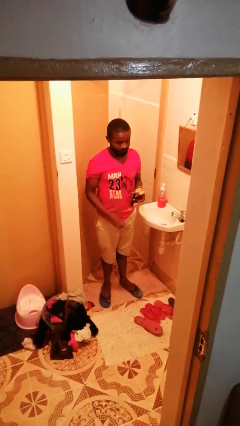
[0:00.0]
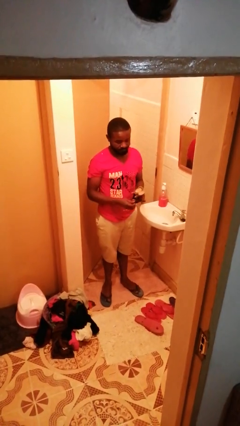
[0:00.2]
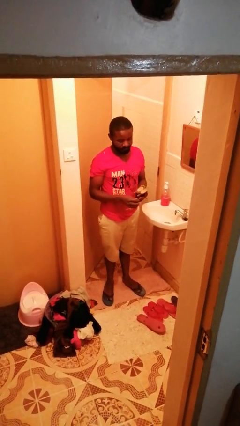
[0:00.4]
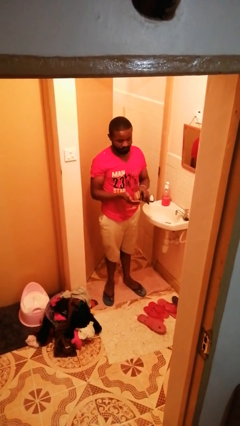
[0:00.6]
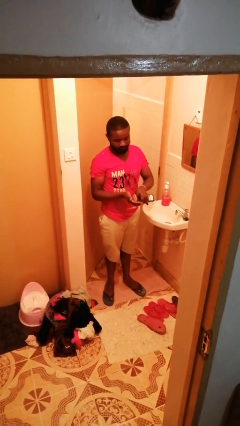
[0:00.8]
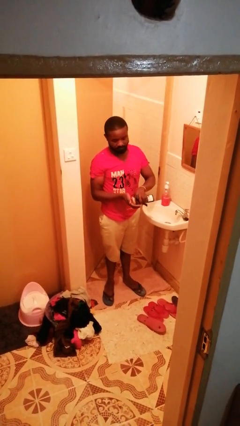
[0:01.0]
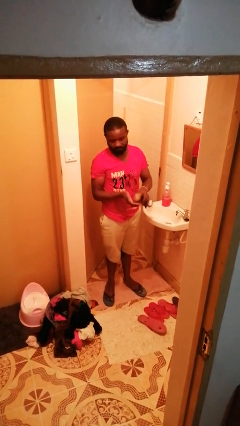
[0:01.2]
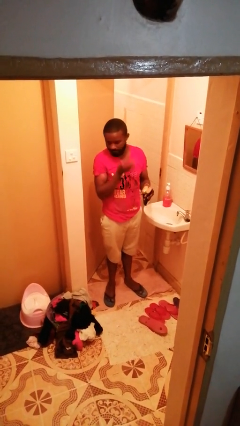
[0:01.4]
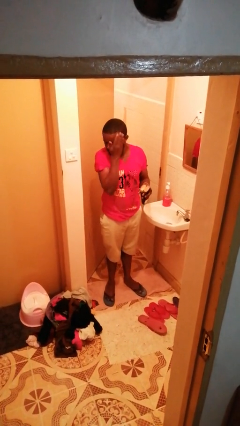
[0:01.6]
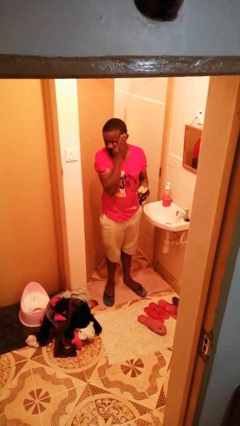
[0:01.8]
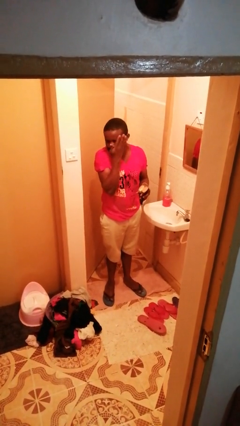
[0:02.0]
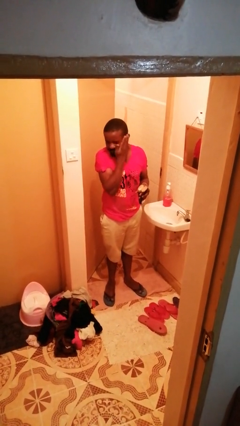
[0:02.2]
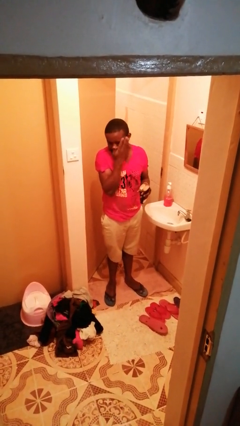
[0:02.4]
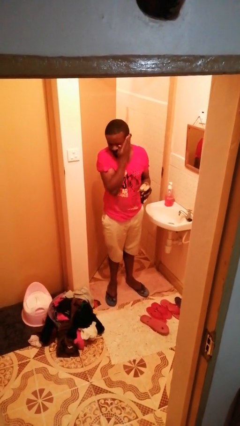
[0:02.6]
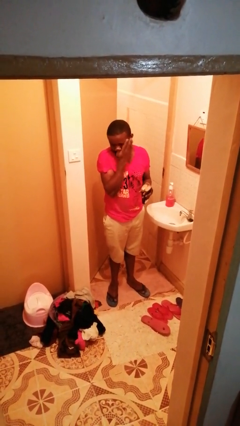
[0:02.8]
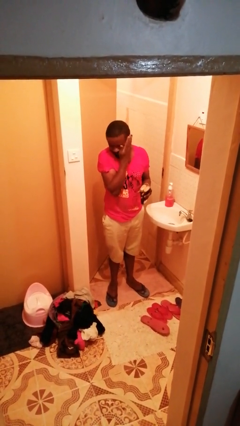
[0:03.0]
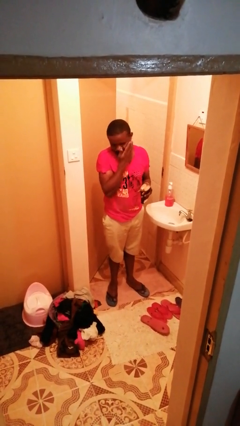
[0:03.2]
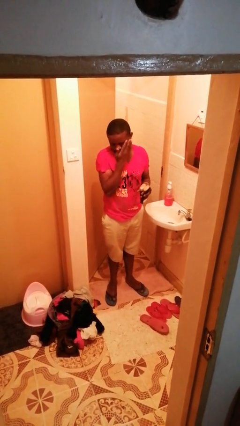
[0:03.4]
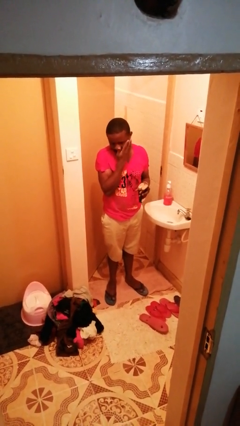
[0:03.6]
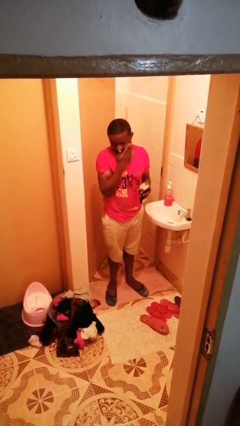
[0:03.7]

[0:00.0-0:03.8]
person applies shaving cream

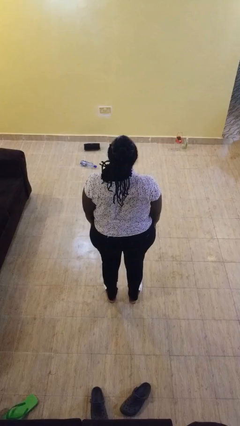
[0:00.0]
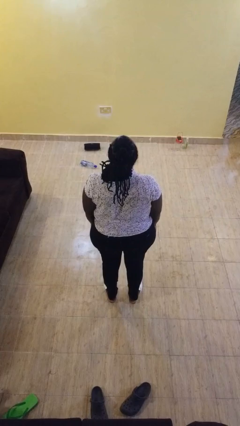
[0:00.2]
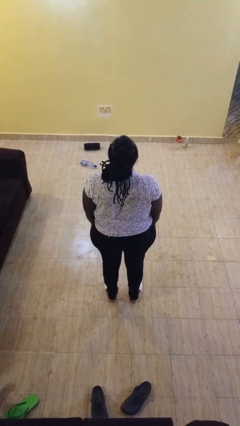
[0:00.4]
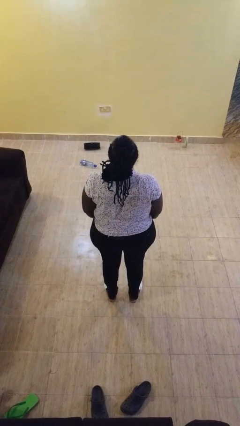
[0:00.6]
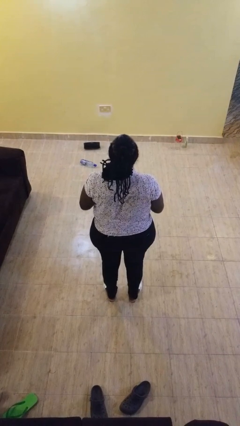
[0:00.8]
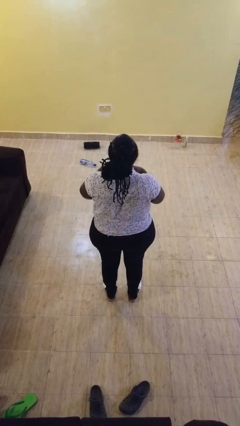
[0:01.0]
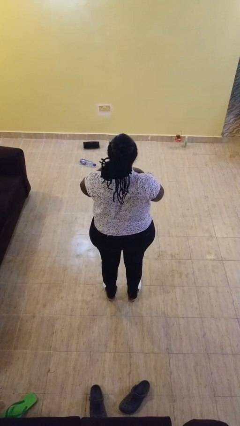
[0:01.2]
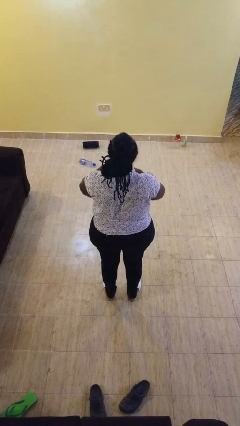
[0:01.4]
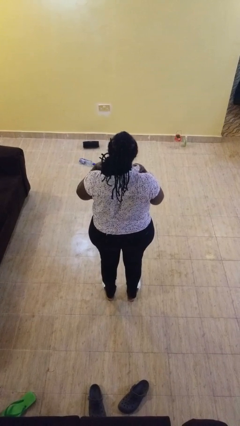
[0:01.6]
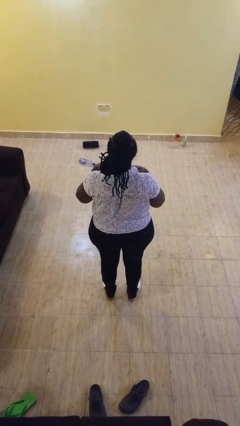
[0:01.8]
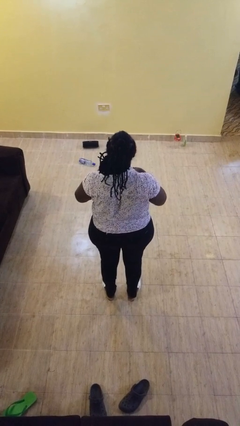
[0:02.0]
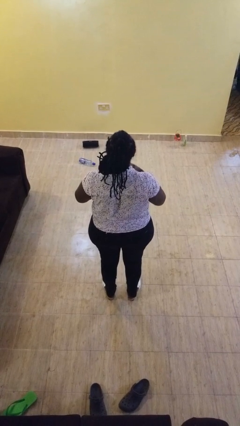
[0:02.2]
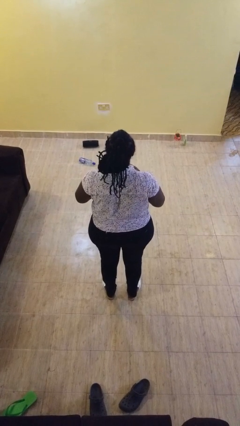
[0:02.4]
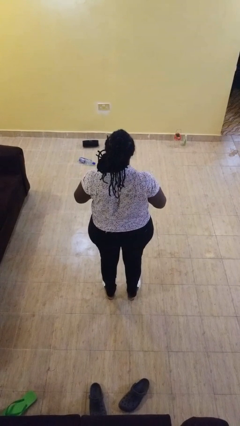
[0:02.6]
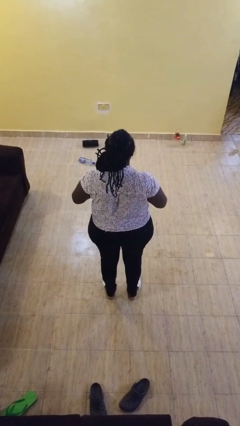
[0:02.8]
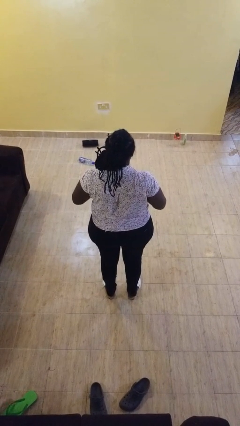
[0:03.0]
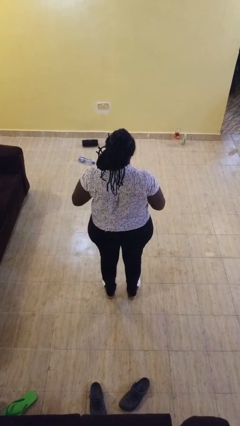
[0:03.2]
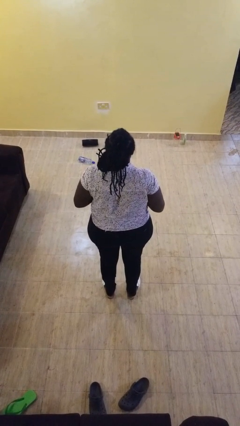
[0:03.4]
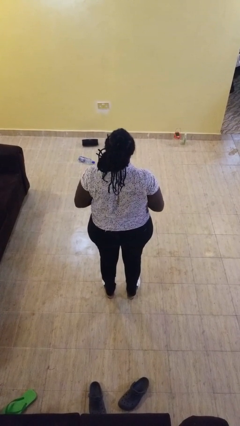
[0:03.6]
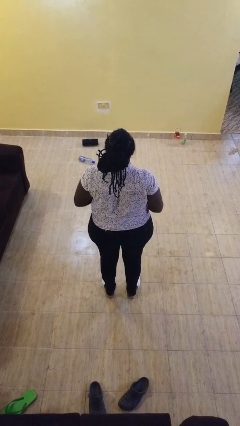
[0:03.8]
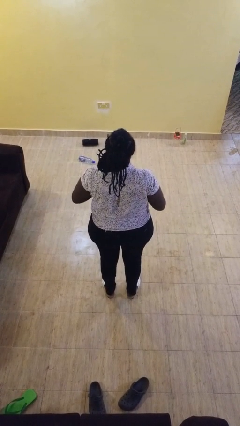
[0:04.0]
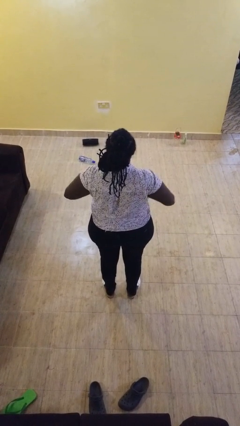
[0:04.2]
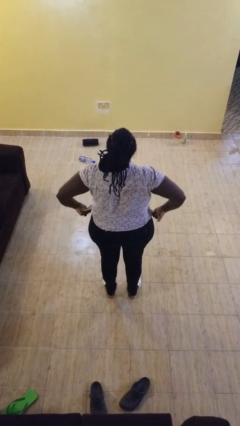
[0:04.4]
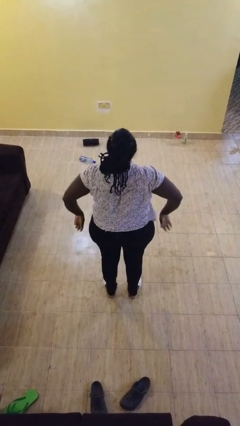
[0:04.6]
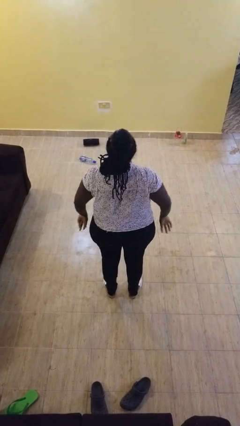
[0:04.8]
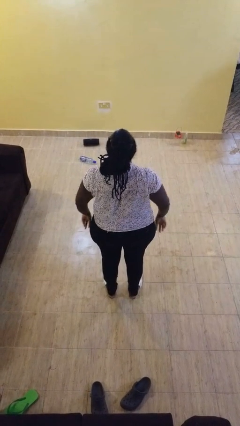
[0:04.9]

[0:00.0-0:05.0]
person unbuttons shirt

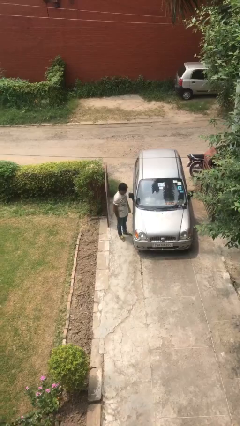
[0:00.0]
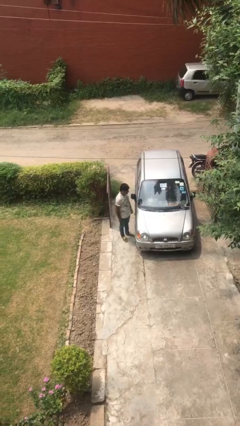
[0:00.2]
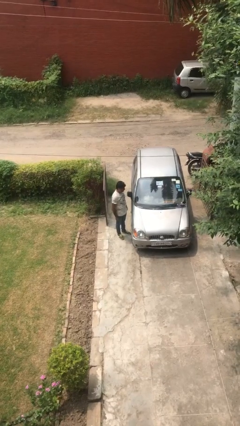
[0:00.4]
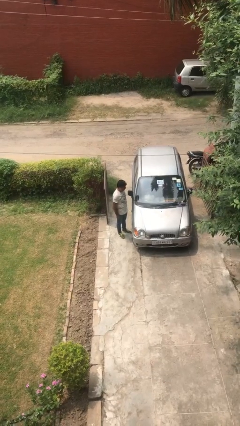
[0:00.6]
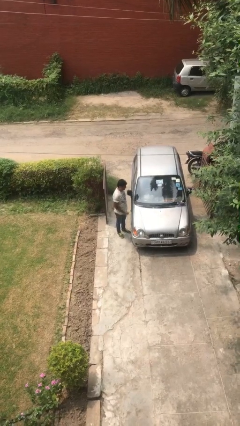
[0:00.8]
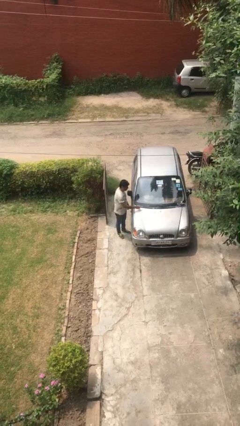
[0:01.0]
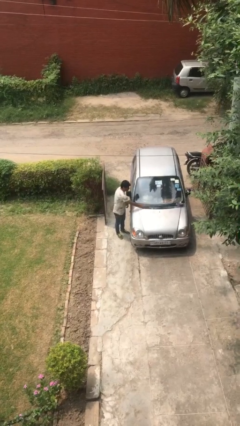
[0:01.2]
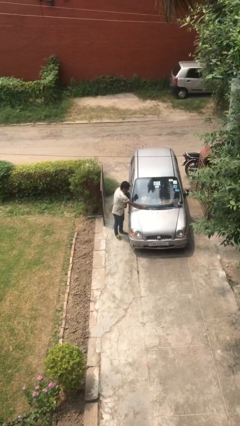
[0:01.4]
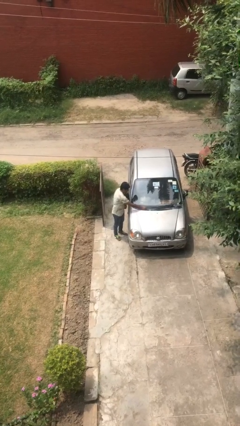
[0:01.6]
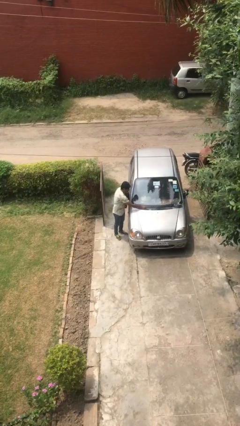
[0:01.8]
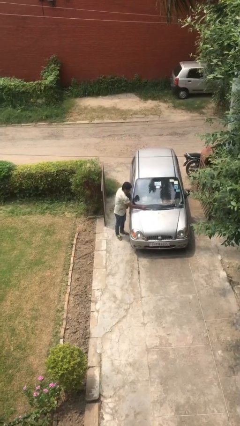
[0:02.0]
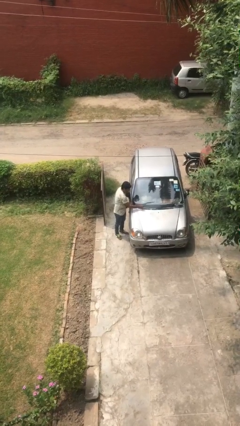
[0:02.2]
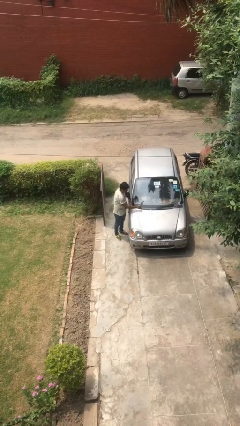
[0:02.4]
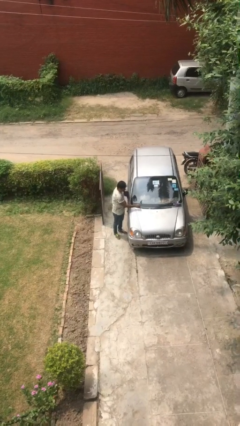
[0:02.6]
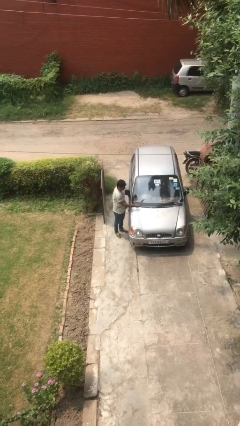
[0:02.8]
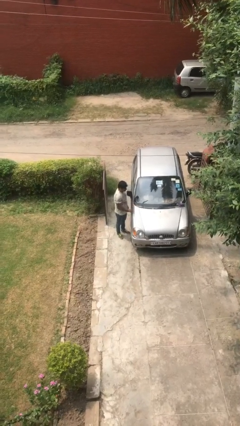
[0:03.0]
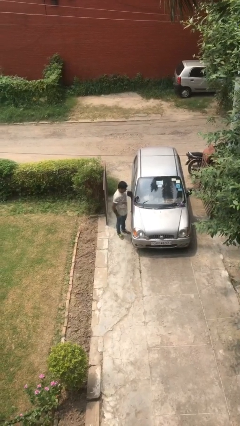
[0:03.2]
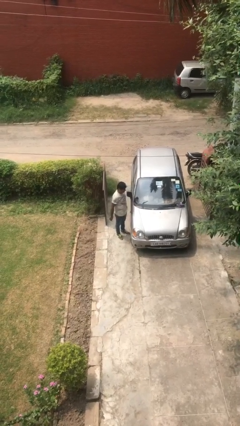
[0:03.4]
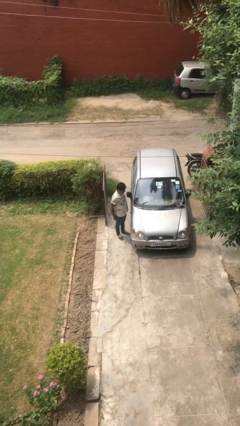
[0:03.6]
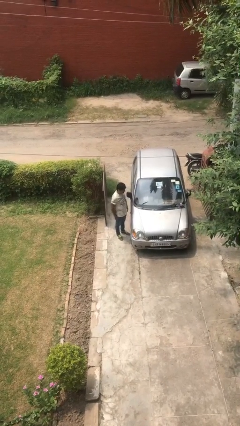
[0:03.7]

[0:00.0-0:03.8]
person flips up car wipers

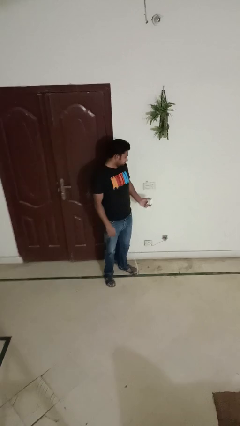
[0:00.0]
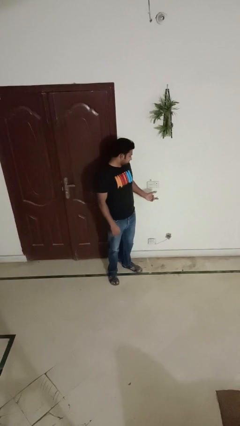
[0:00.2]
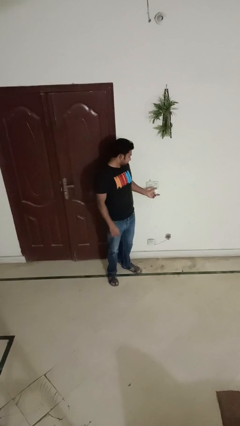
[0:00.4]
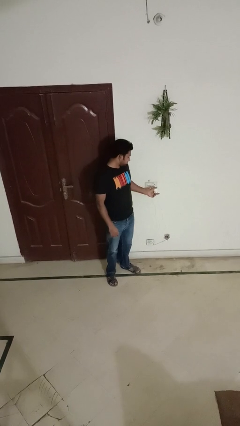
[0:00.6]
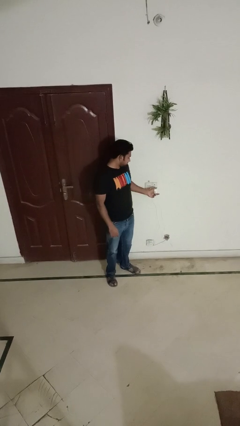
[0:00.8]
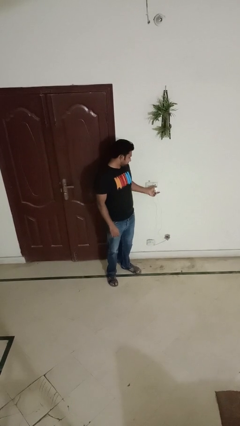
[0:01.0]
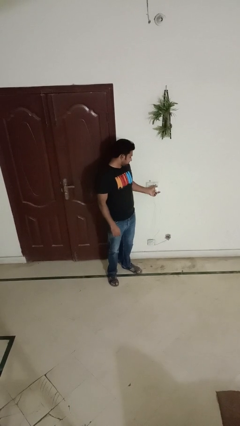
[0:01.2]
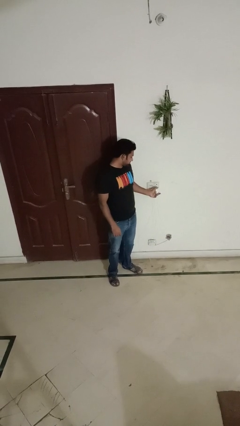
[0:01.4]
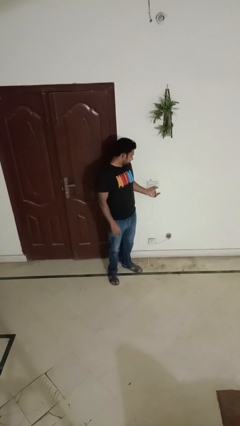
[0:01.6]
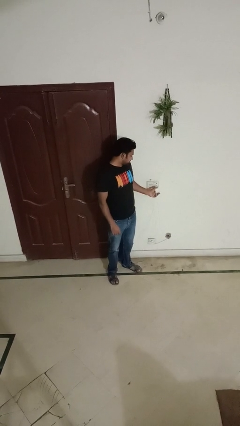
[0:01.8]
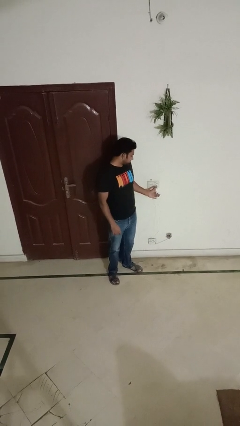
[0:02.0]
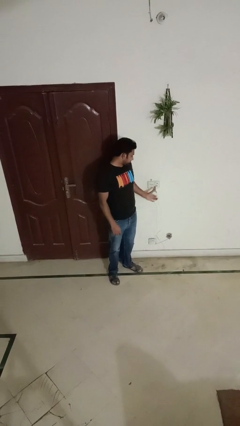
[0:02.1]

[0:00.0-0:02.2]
person plugs into electrical socket

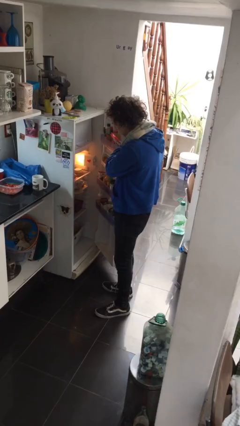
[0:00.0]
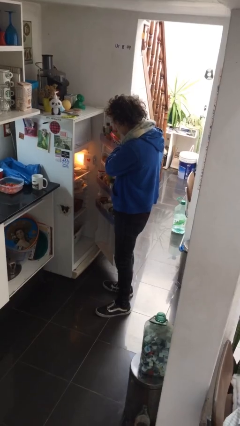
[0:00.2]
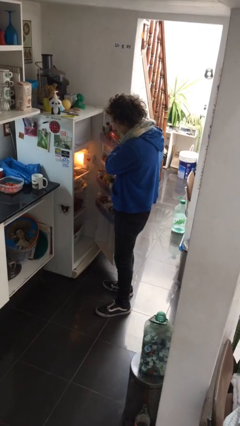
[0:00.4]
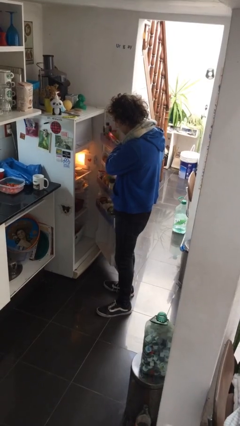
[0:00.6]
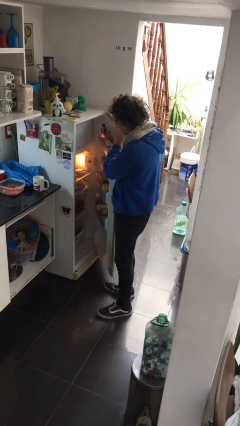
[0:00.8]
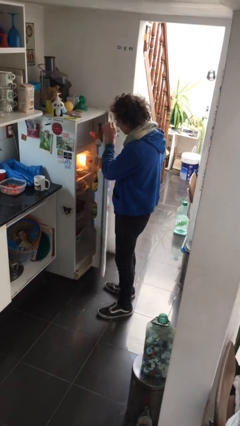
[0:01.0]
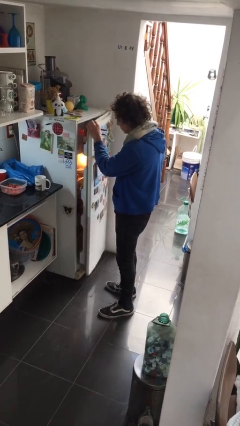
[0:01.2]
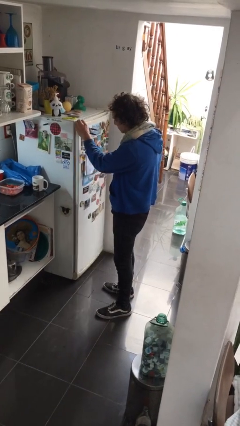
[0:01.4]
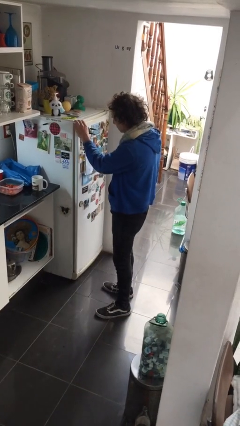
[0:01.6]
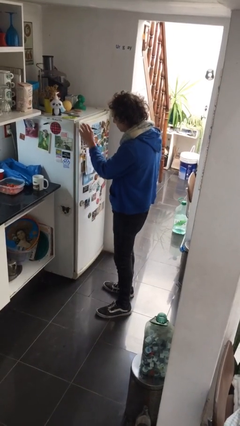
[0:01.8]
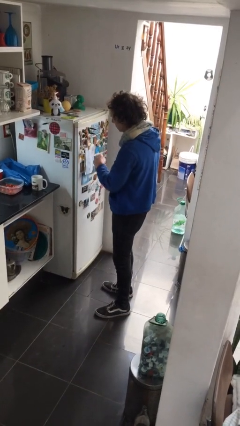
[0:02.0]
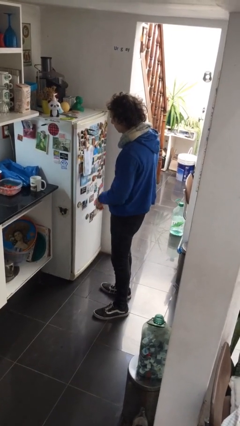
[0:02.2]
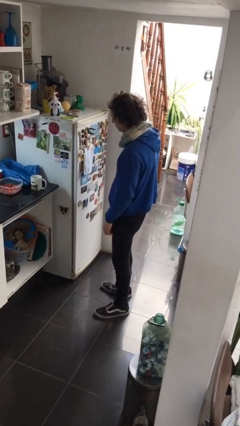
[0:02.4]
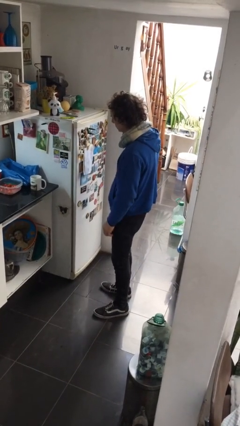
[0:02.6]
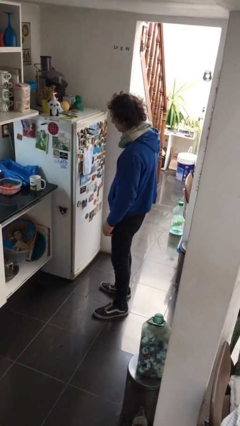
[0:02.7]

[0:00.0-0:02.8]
person closes refrigerator
